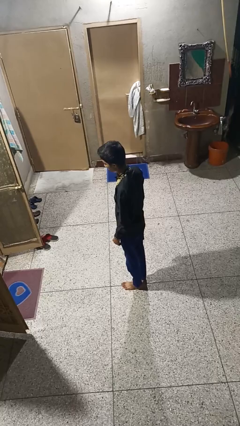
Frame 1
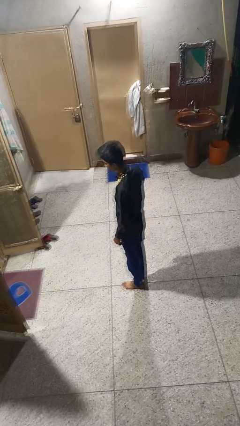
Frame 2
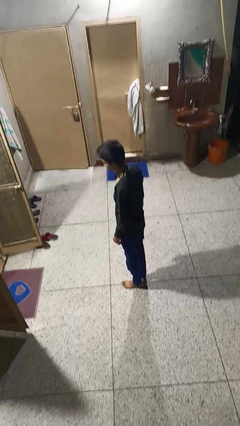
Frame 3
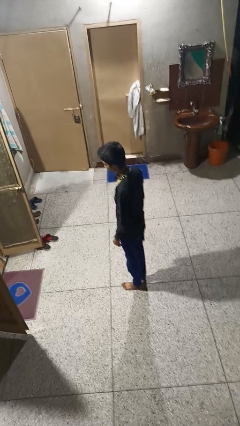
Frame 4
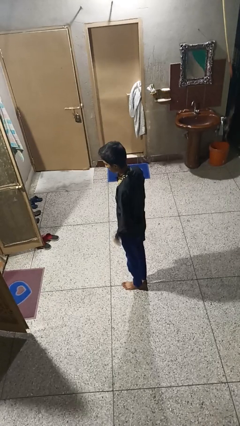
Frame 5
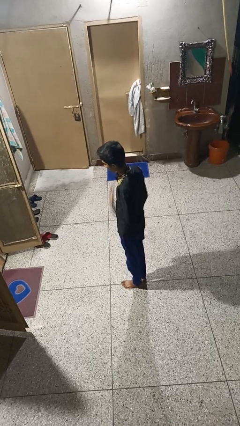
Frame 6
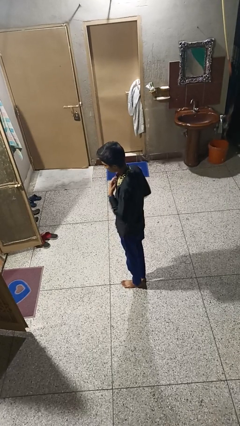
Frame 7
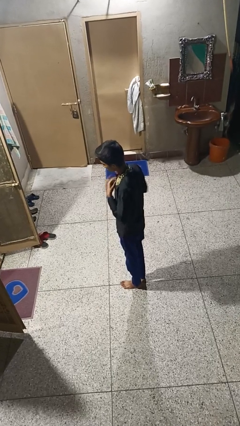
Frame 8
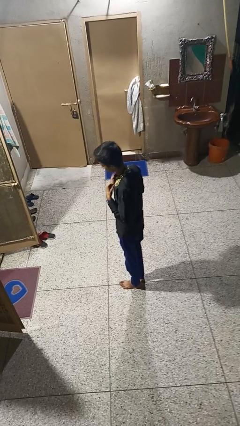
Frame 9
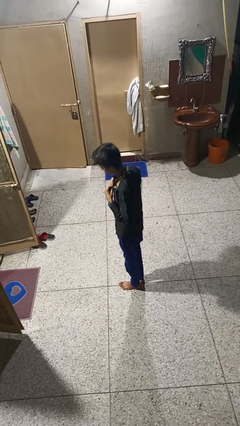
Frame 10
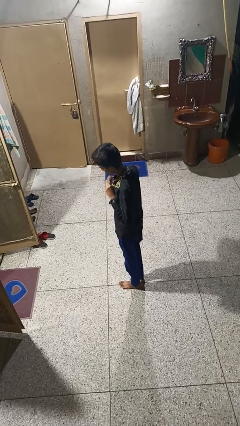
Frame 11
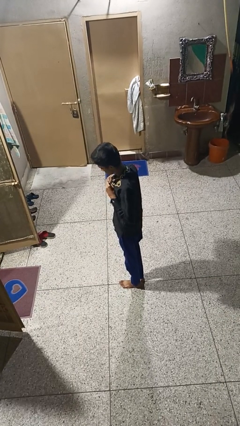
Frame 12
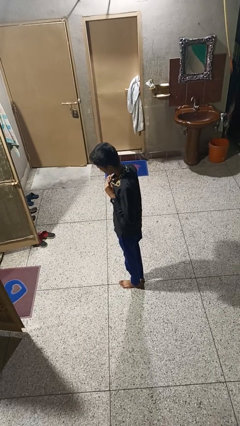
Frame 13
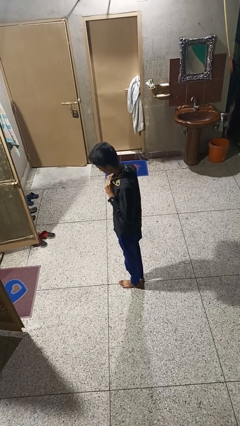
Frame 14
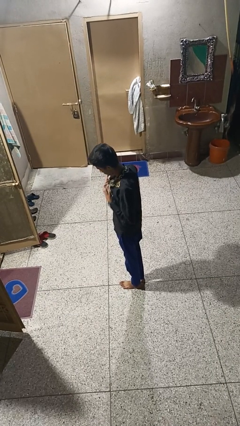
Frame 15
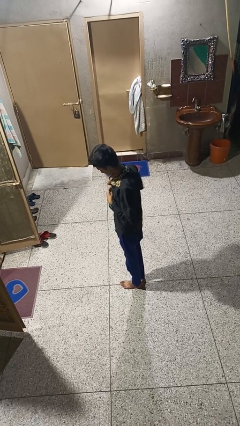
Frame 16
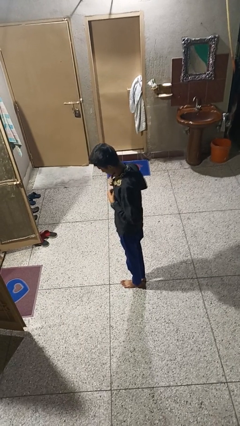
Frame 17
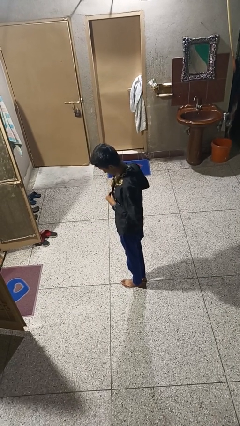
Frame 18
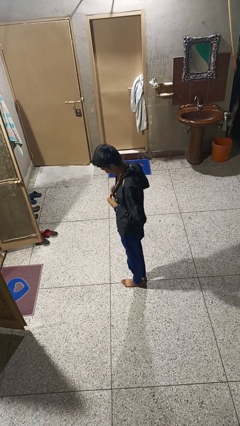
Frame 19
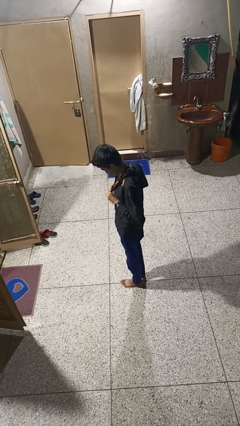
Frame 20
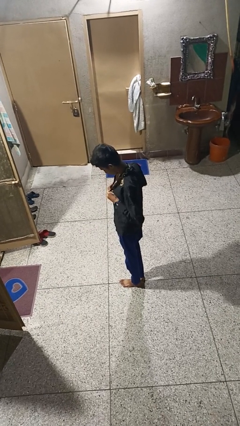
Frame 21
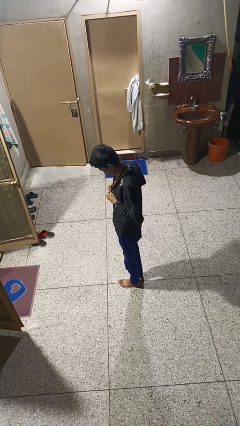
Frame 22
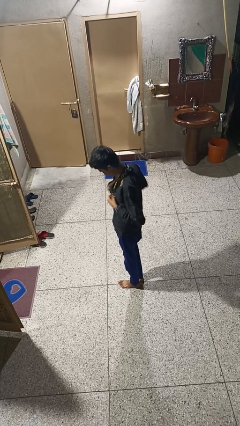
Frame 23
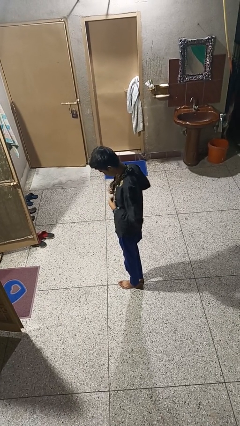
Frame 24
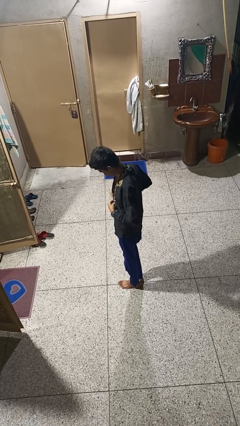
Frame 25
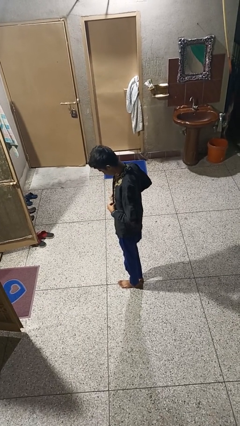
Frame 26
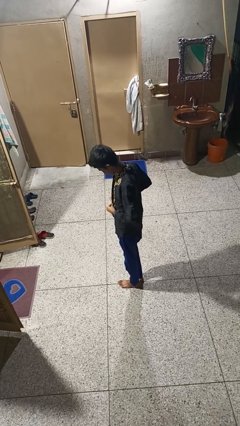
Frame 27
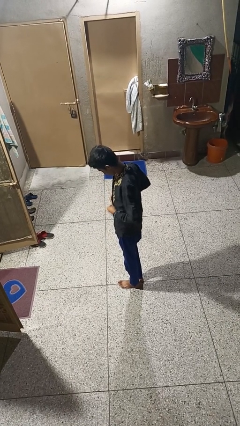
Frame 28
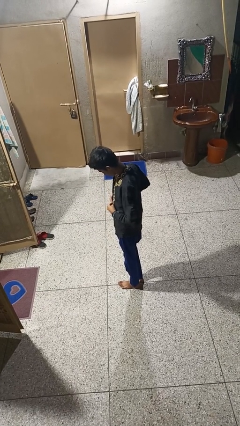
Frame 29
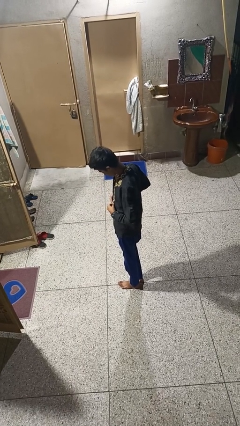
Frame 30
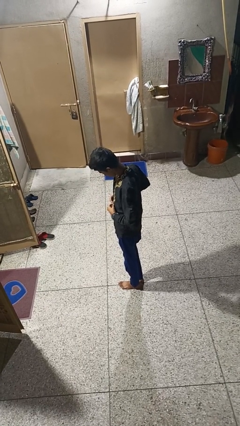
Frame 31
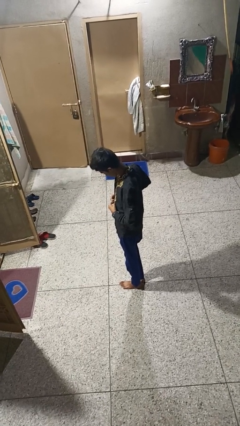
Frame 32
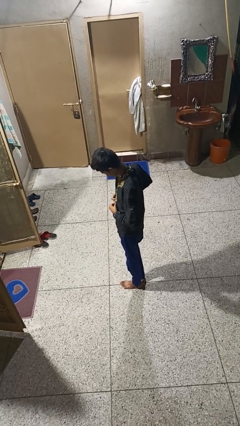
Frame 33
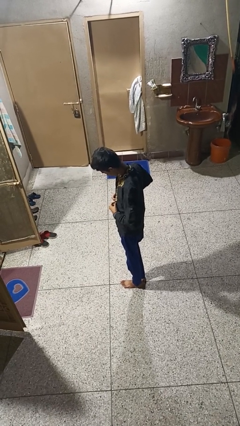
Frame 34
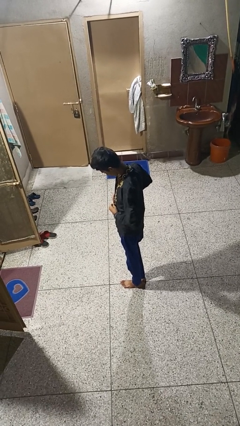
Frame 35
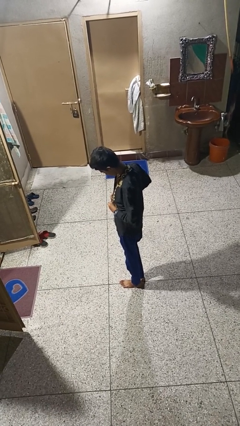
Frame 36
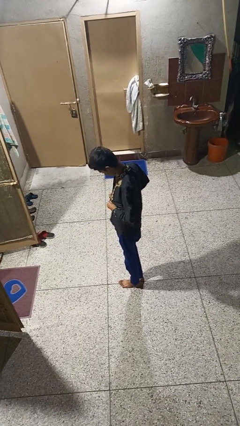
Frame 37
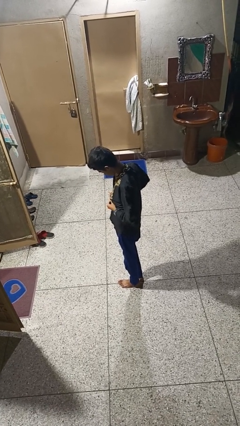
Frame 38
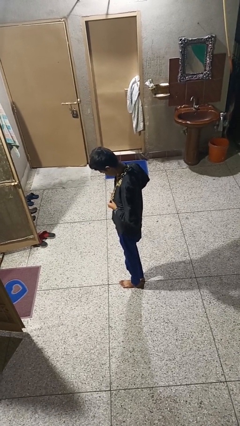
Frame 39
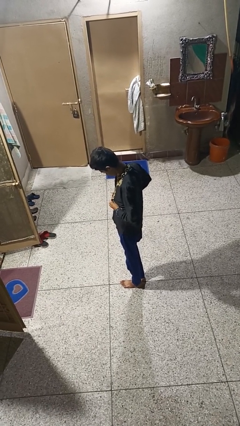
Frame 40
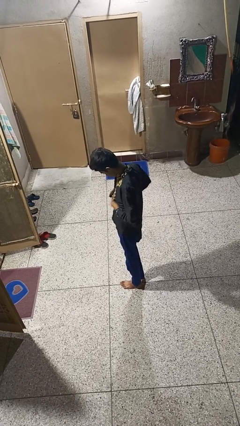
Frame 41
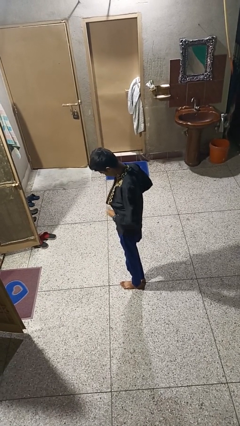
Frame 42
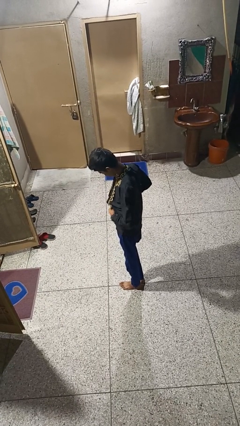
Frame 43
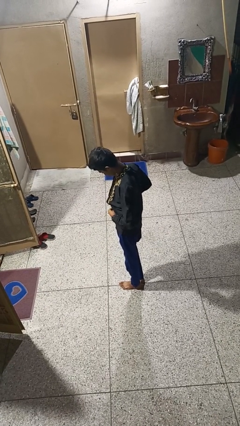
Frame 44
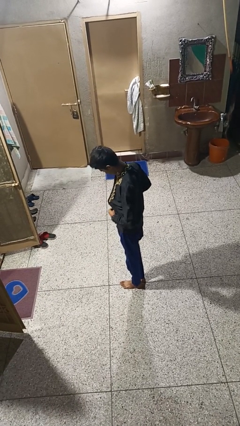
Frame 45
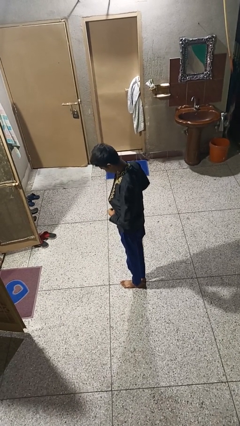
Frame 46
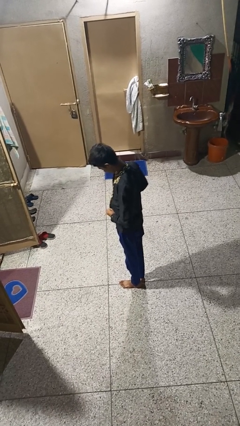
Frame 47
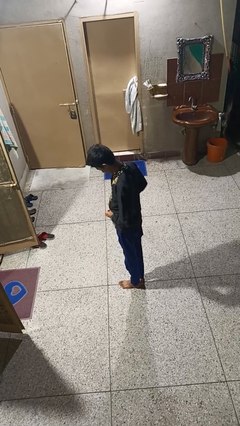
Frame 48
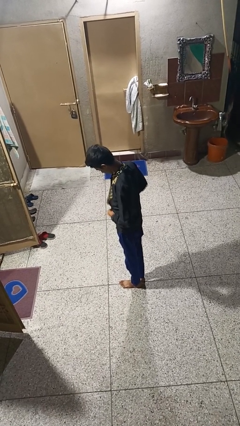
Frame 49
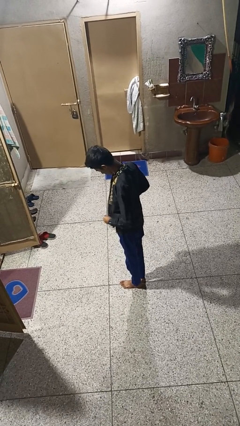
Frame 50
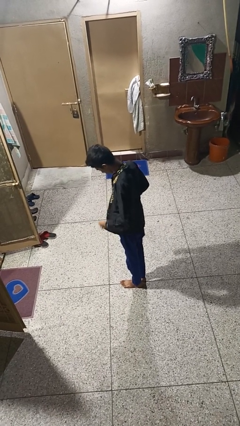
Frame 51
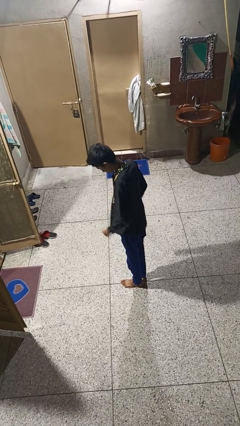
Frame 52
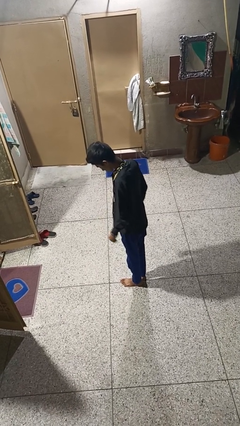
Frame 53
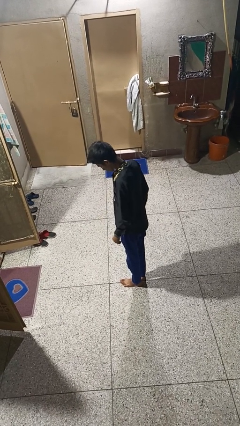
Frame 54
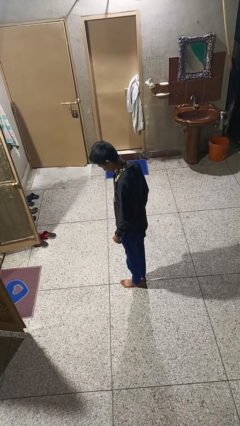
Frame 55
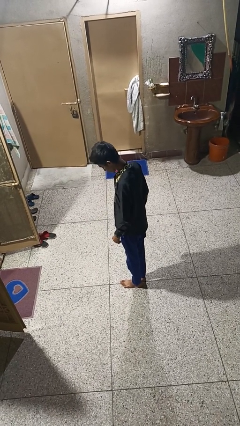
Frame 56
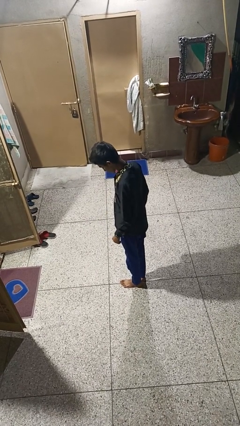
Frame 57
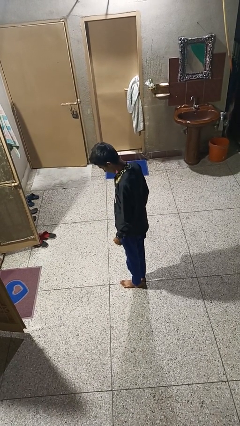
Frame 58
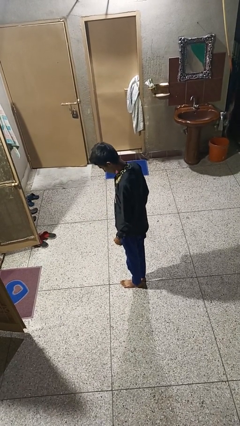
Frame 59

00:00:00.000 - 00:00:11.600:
person unbuttons shirt

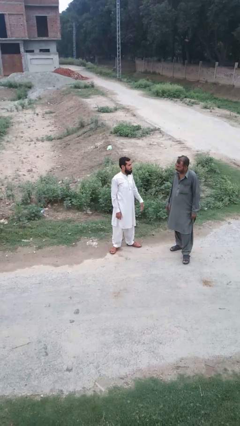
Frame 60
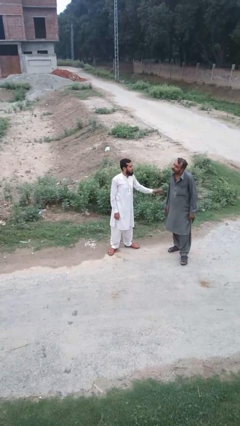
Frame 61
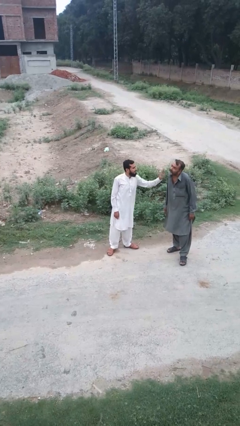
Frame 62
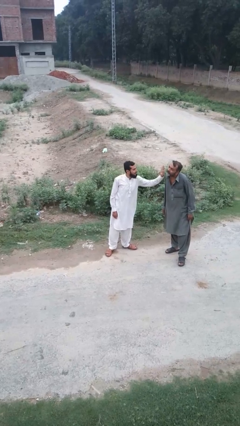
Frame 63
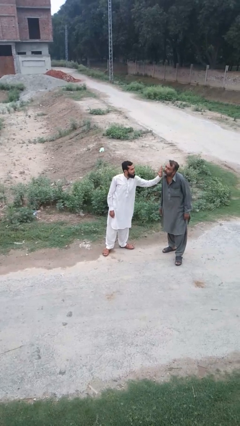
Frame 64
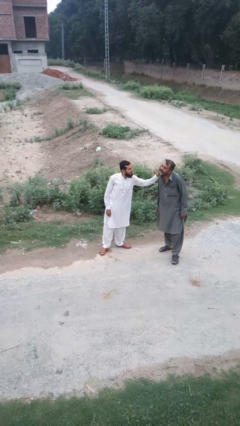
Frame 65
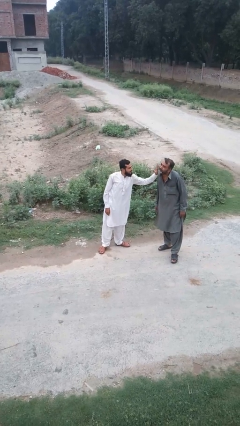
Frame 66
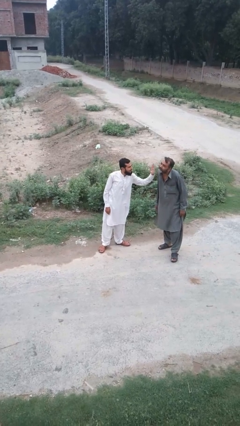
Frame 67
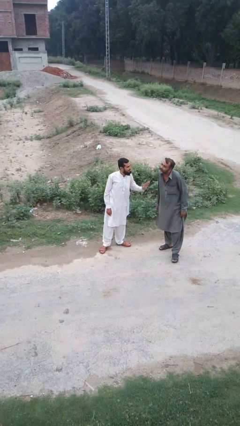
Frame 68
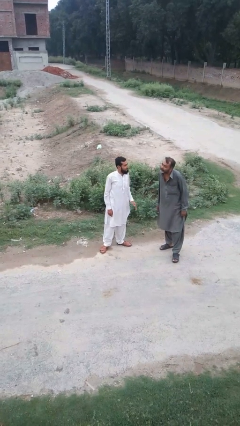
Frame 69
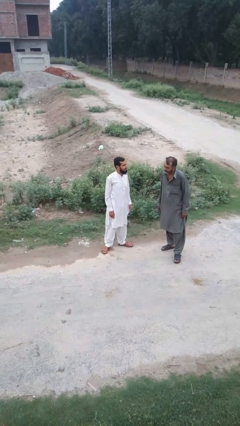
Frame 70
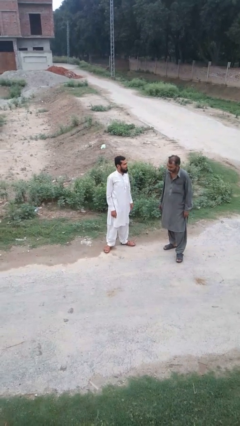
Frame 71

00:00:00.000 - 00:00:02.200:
person touches face of person

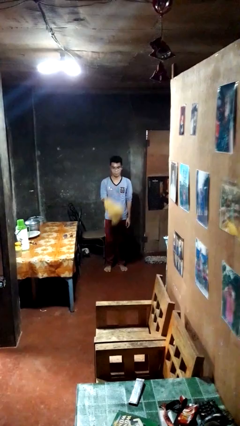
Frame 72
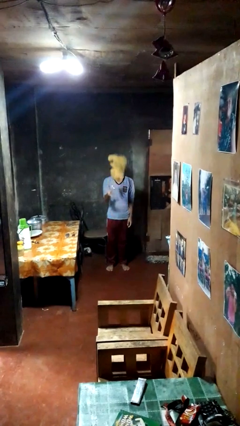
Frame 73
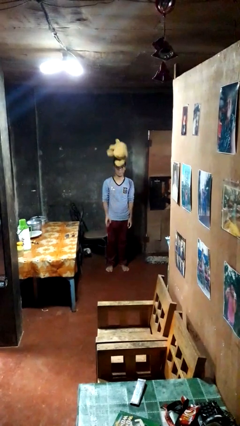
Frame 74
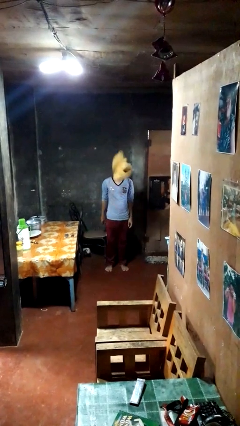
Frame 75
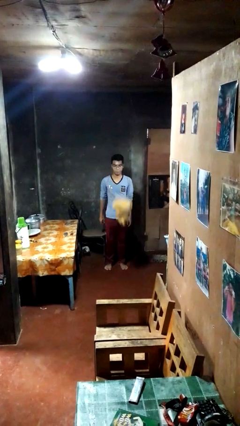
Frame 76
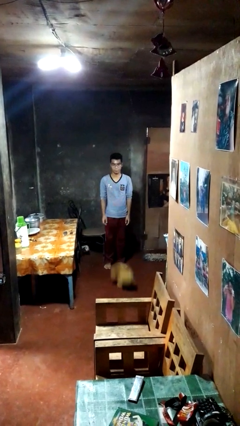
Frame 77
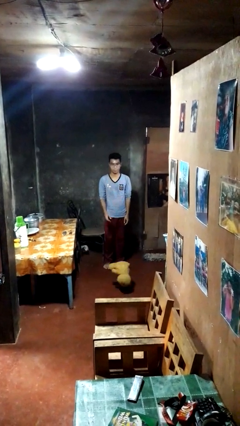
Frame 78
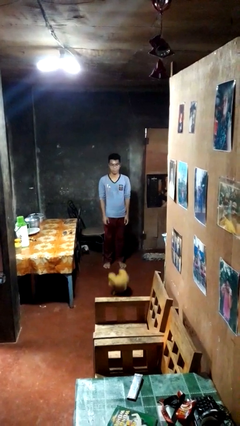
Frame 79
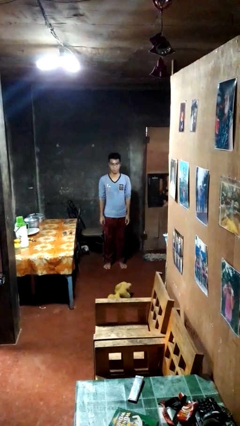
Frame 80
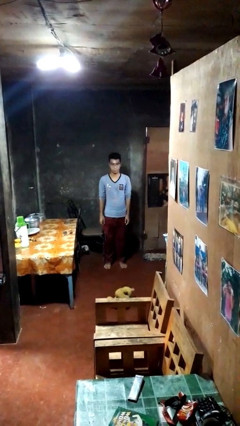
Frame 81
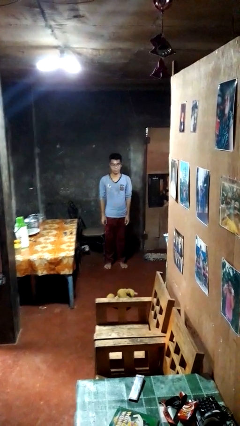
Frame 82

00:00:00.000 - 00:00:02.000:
person throws object into air

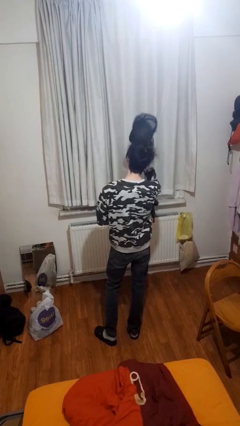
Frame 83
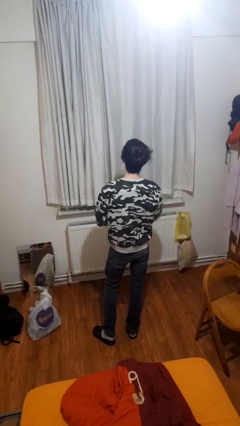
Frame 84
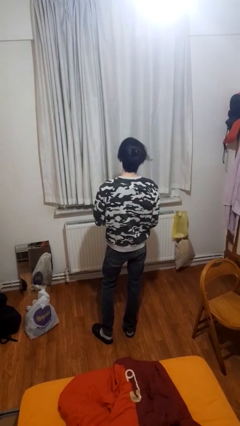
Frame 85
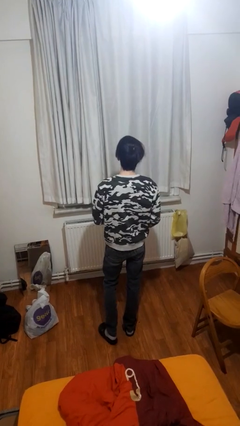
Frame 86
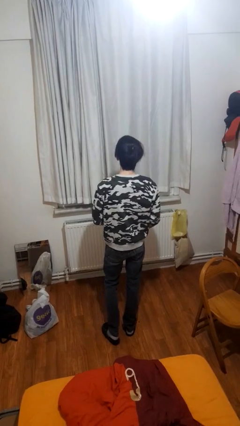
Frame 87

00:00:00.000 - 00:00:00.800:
person takes off hat

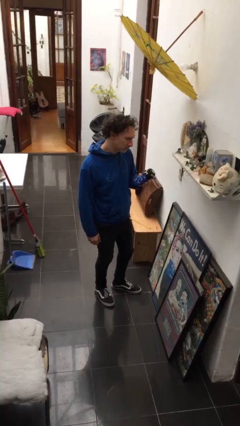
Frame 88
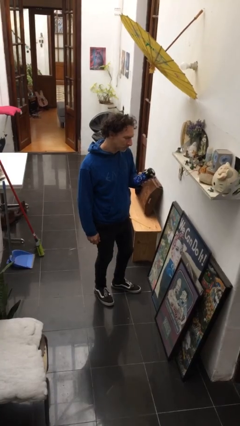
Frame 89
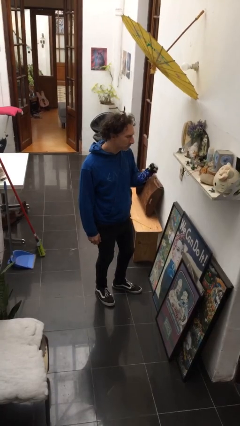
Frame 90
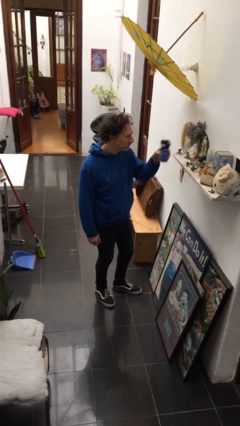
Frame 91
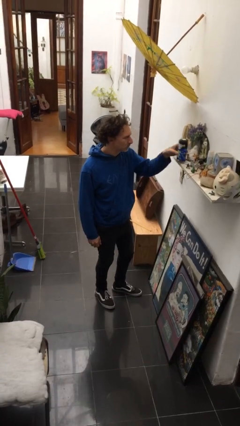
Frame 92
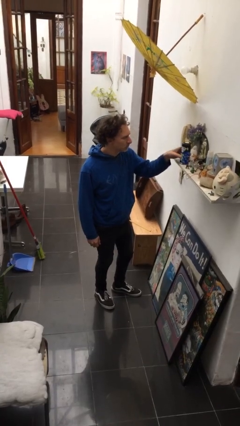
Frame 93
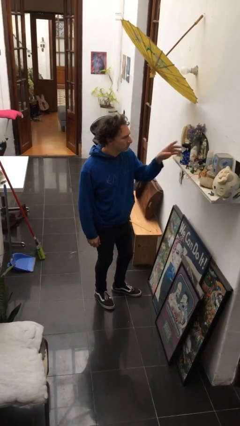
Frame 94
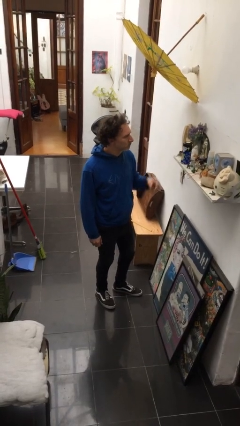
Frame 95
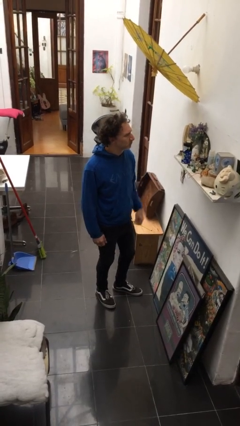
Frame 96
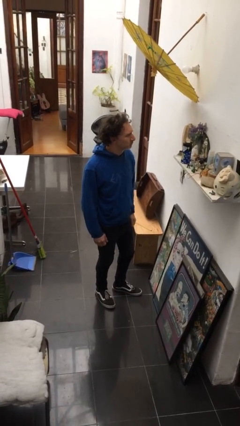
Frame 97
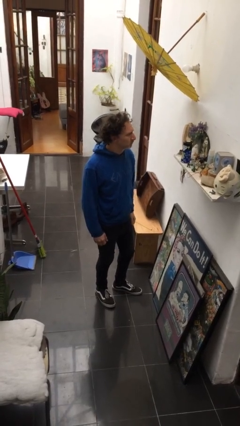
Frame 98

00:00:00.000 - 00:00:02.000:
person puts down object on shelf
